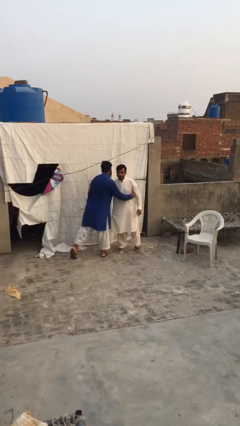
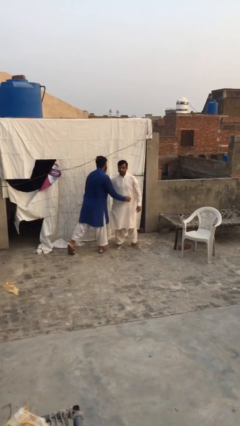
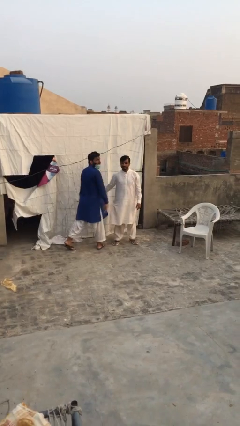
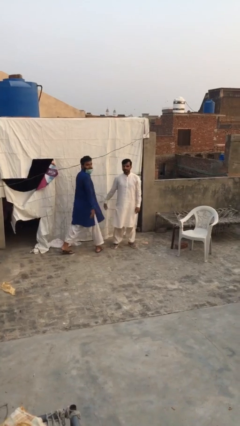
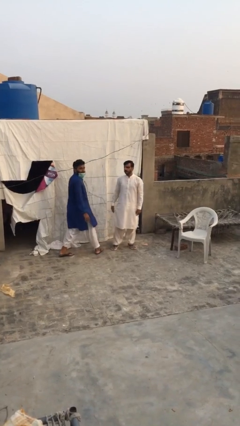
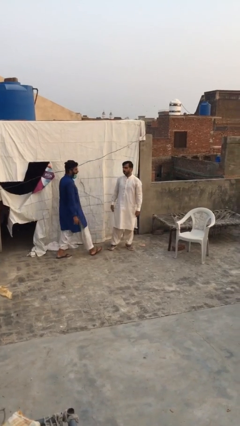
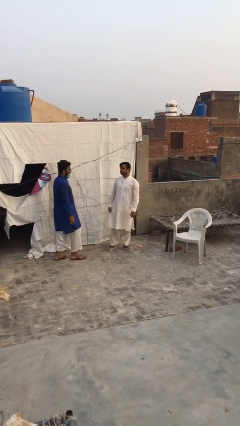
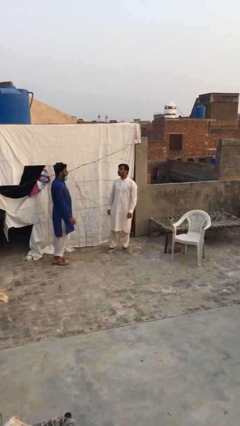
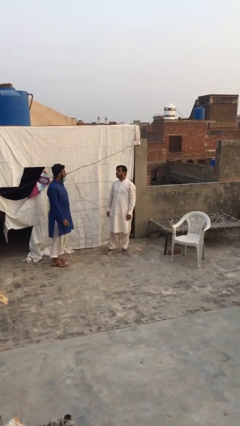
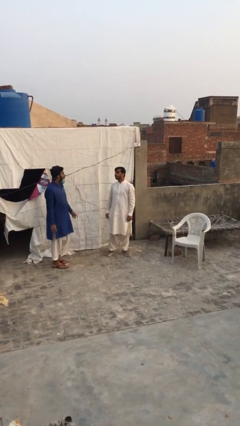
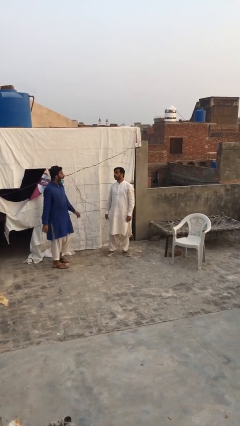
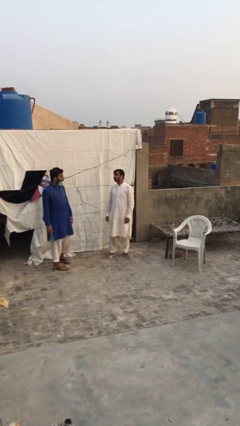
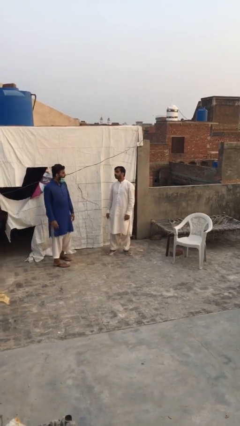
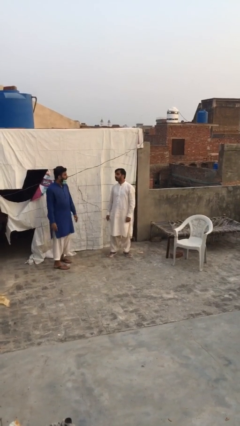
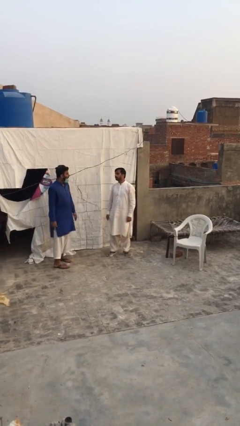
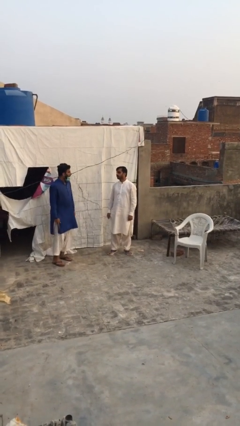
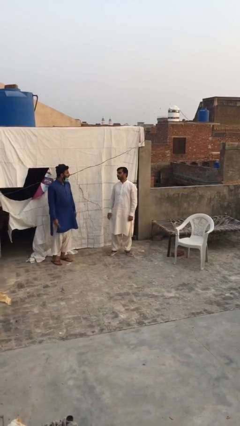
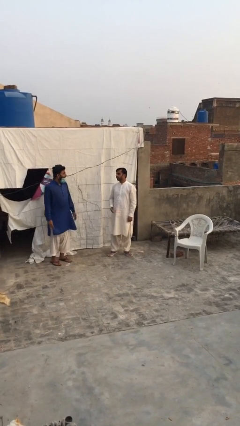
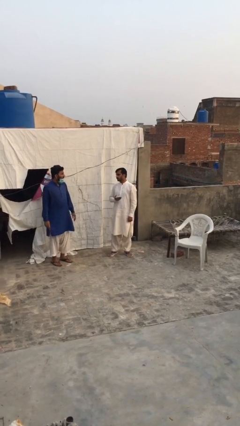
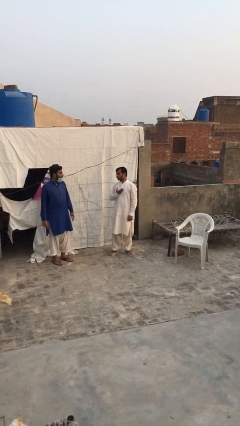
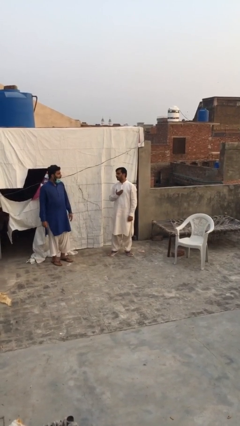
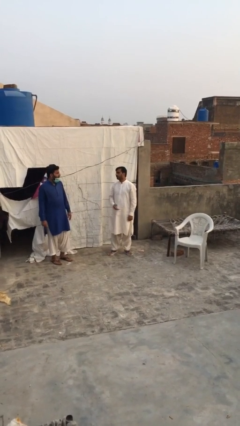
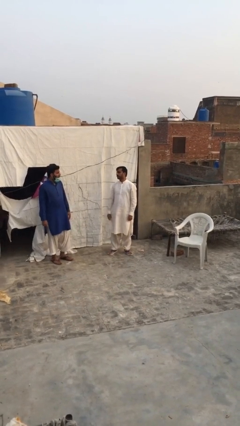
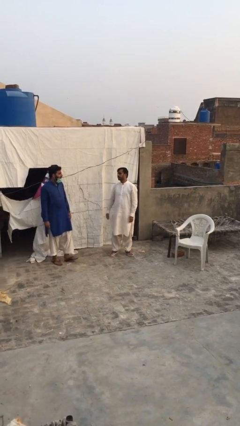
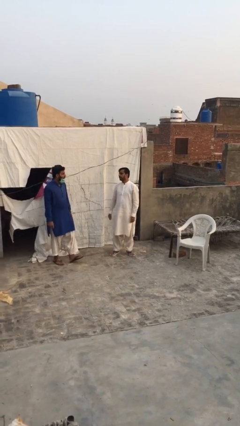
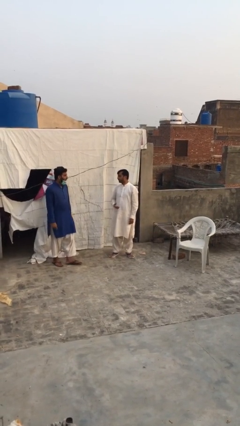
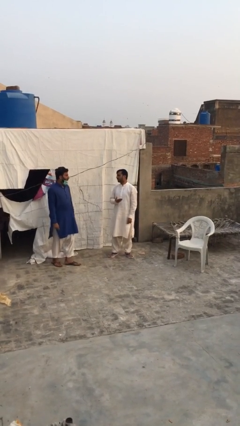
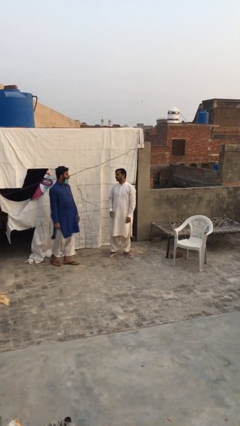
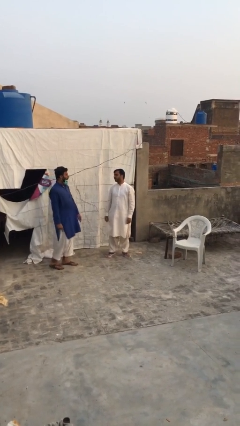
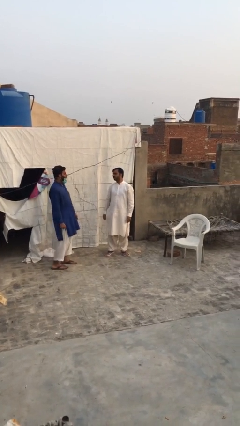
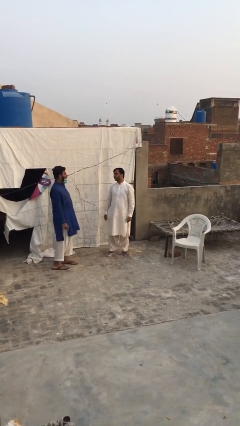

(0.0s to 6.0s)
person talks to person

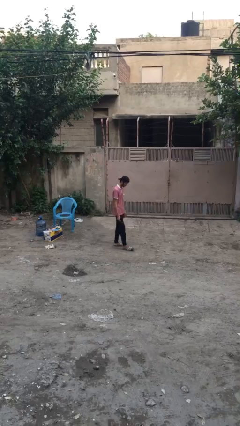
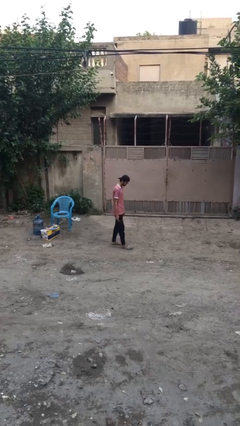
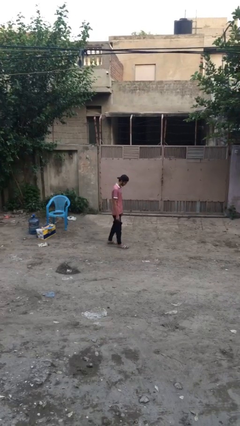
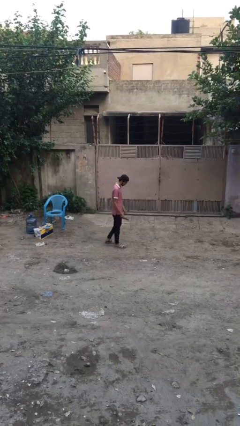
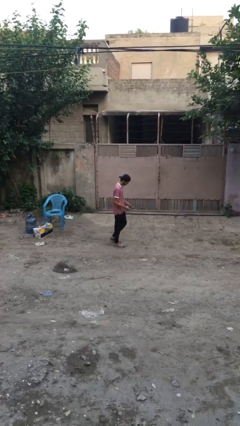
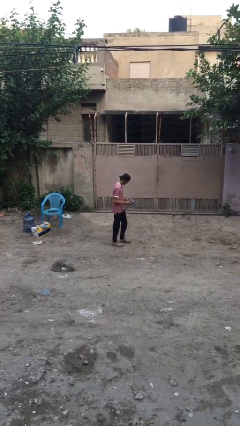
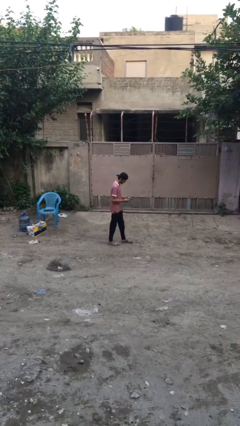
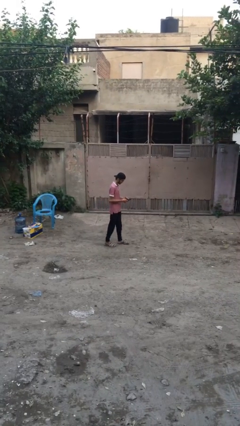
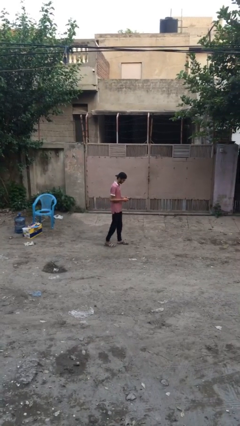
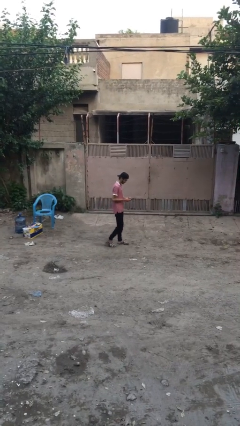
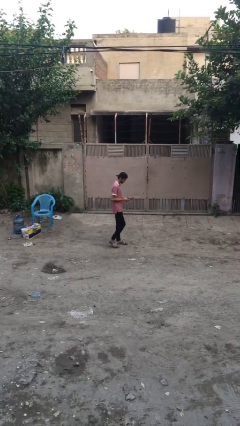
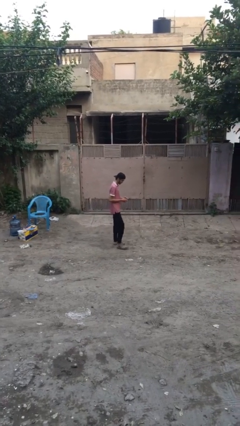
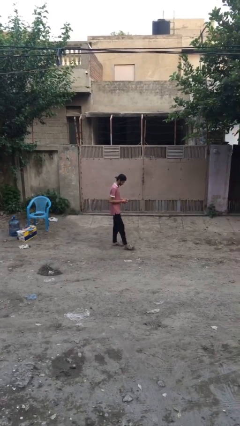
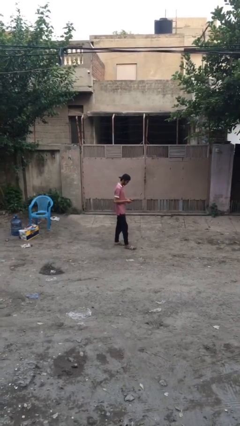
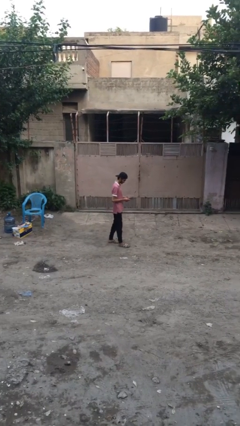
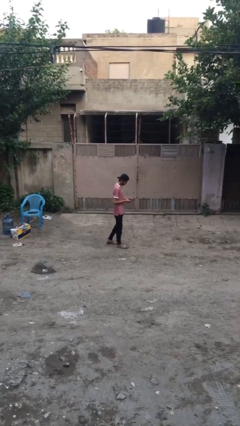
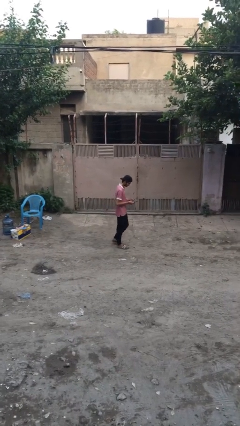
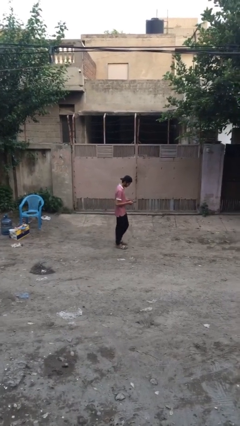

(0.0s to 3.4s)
person texts on phone

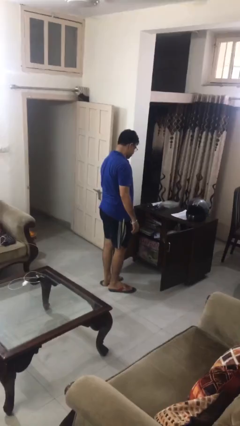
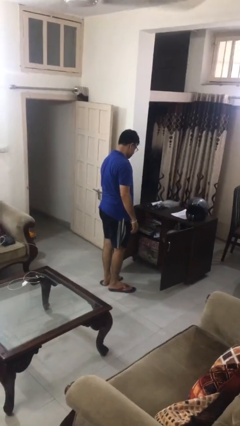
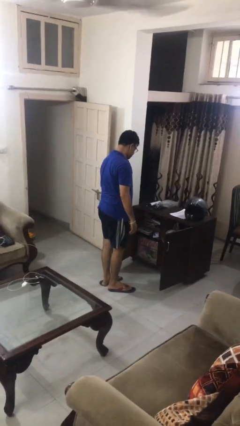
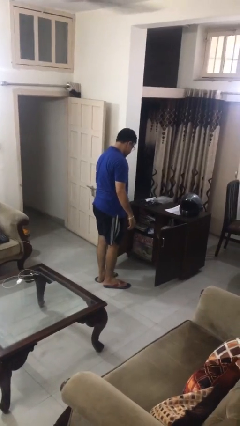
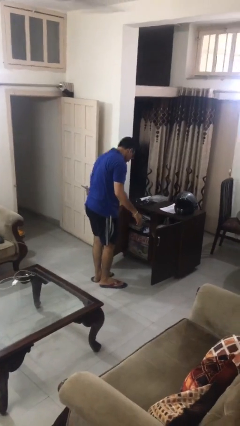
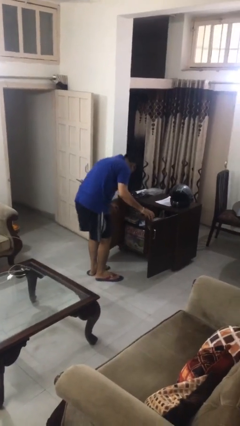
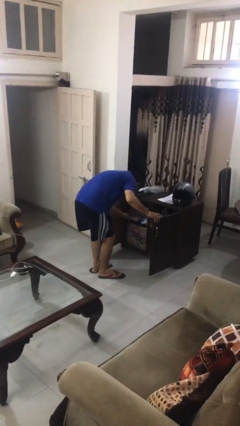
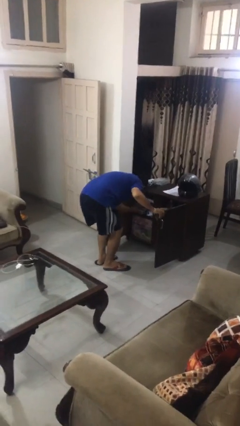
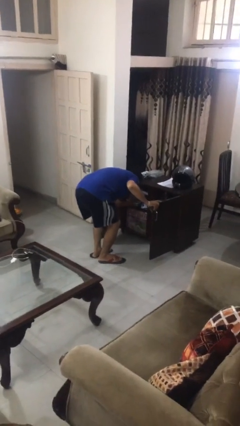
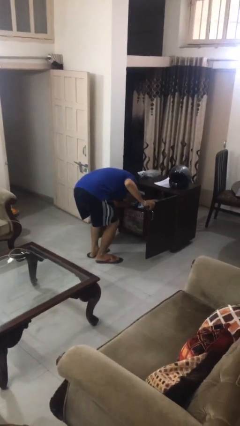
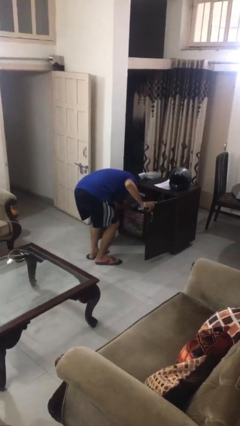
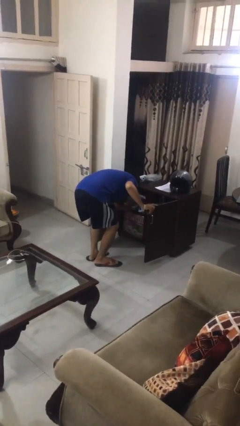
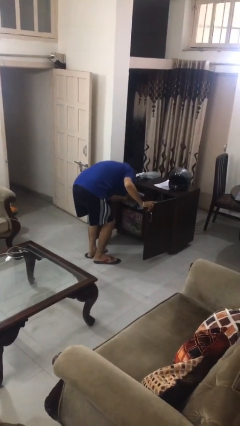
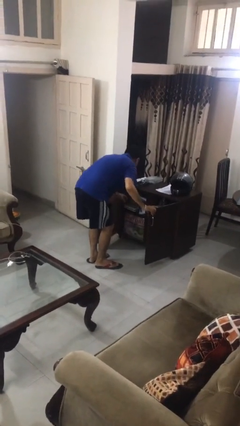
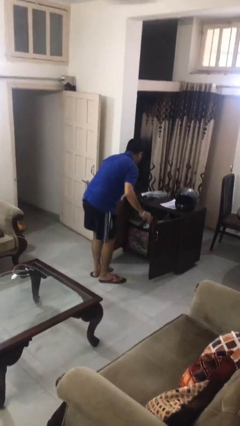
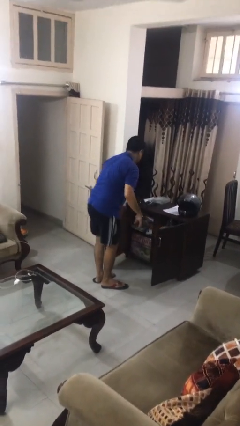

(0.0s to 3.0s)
person searches in cabinet

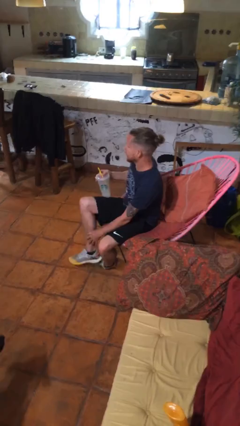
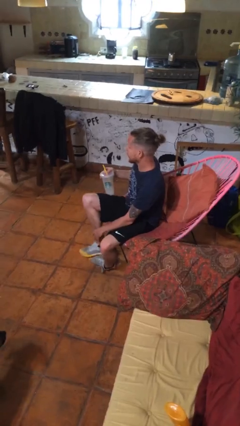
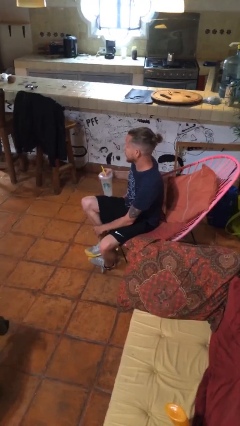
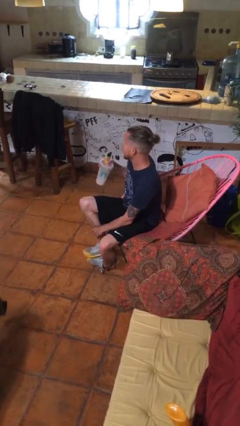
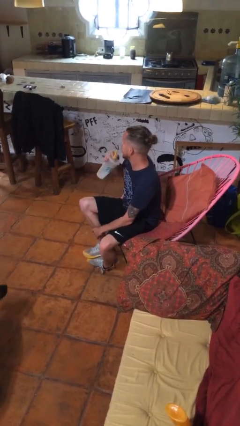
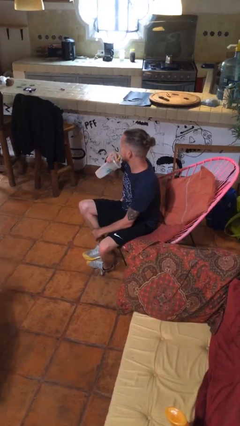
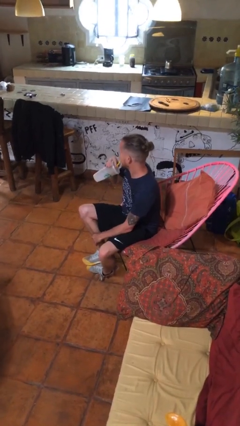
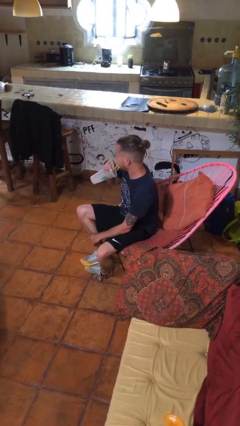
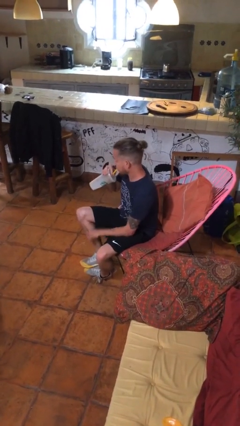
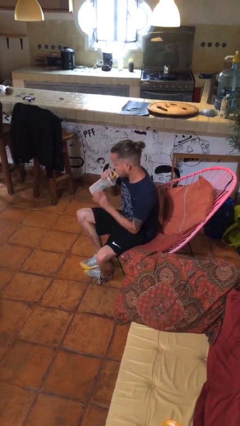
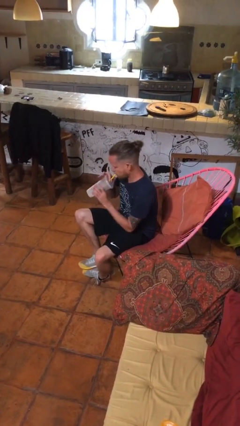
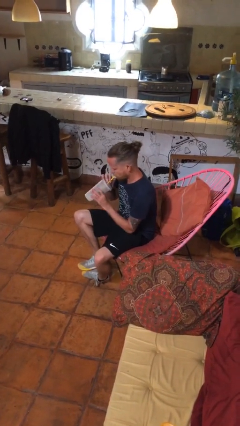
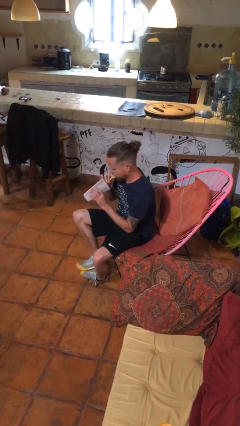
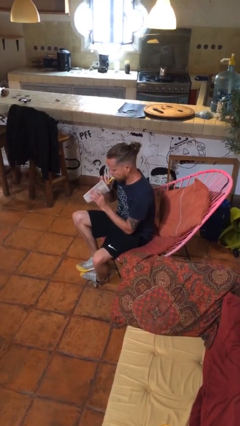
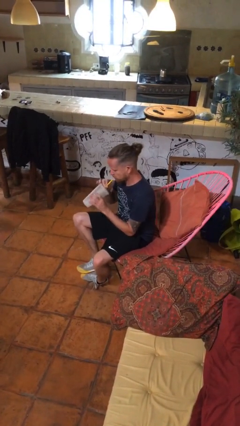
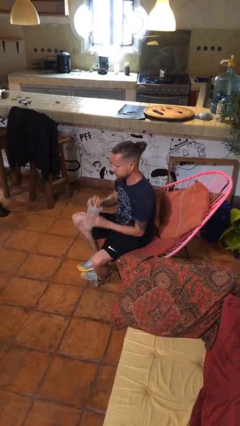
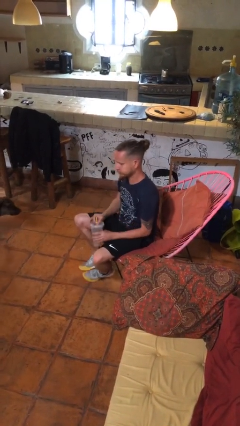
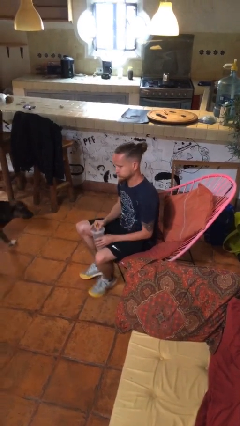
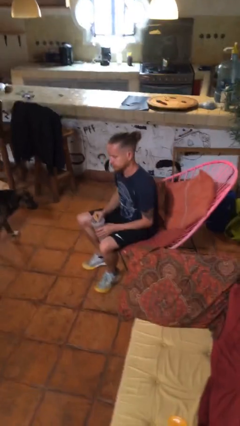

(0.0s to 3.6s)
person drinks from straw

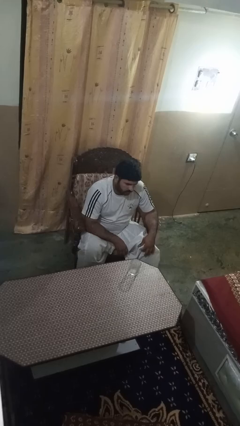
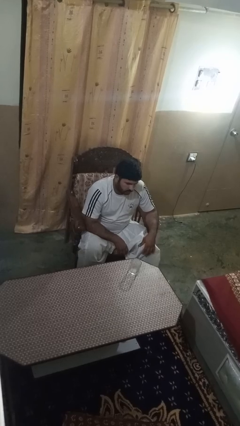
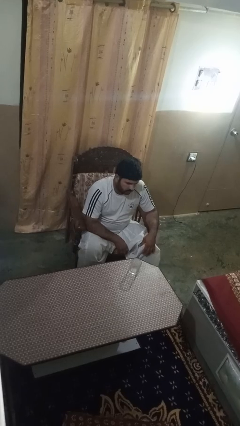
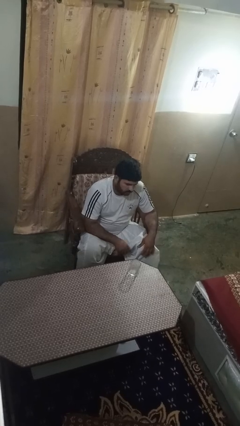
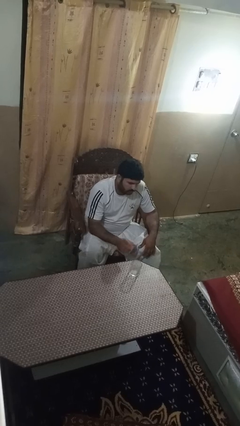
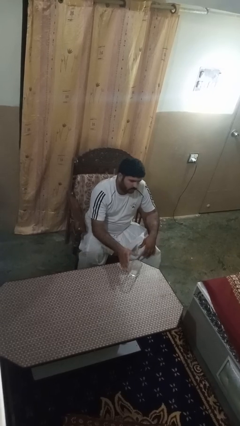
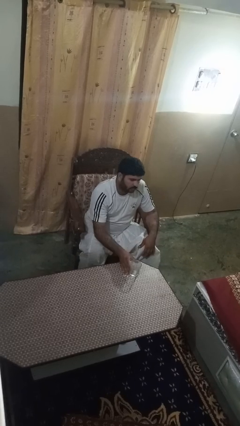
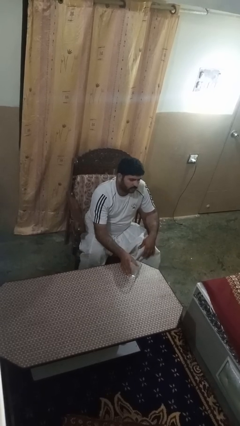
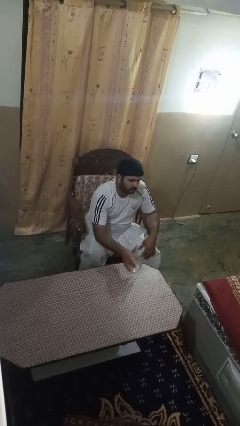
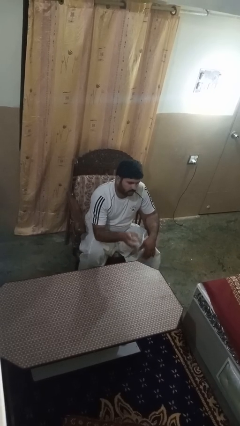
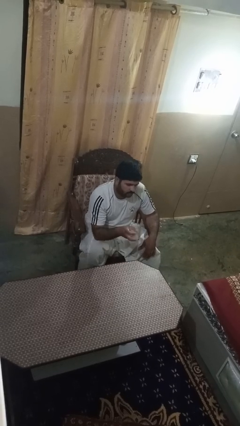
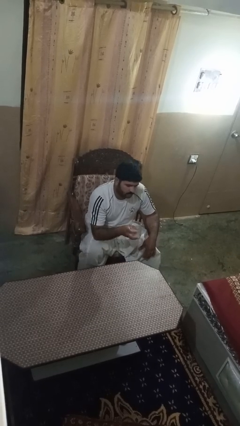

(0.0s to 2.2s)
person picks up object from table
